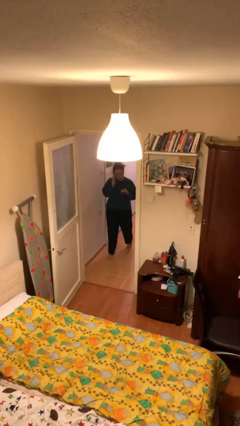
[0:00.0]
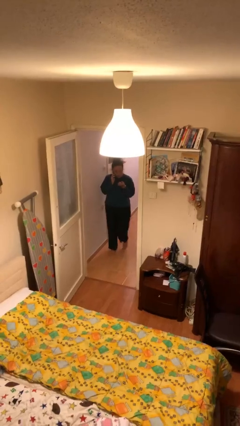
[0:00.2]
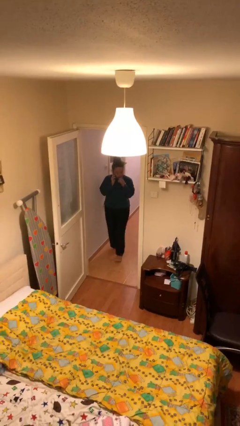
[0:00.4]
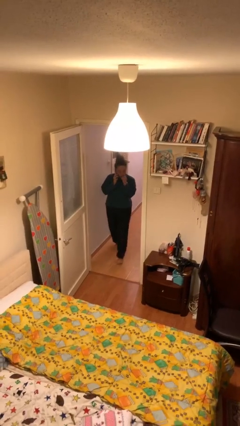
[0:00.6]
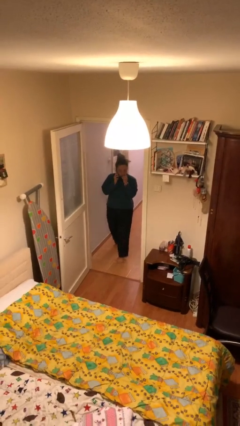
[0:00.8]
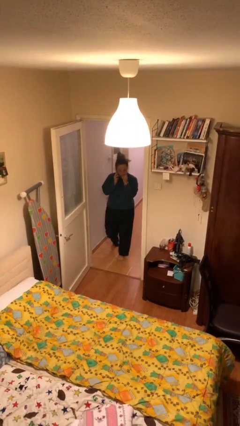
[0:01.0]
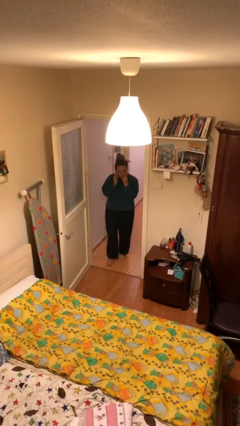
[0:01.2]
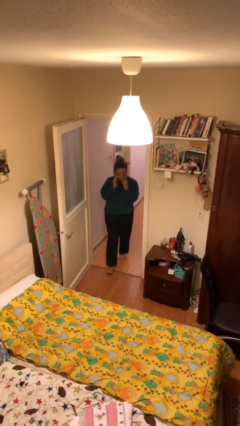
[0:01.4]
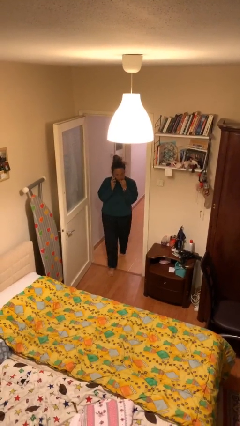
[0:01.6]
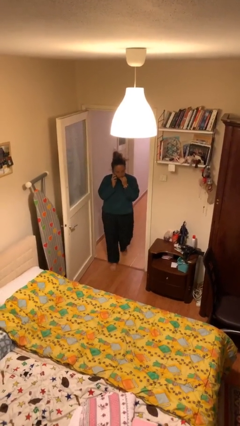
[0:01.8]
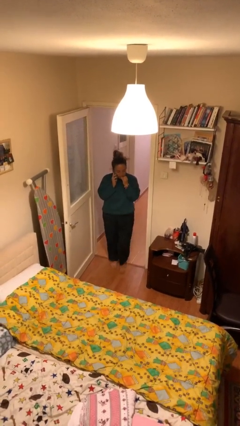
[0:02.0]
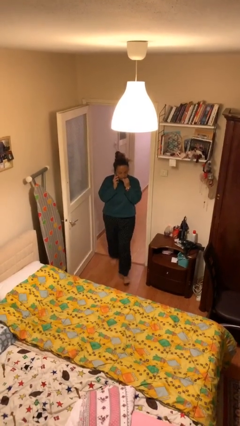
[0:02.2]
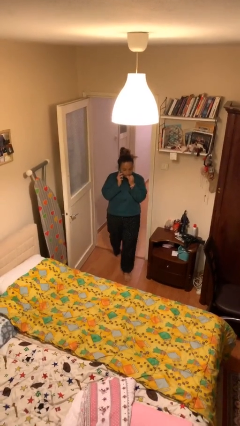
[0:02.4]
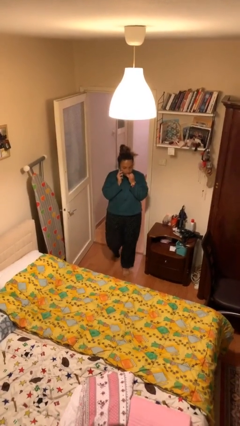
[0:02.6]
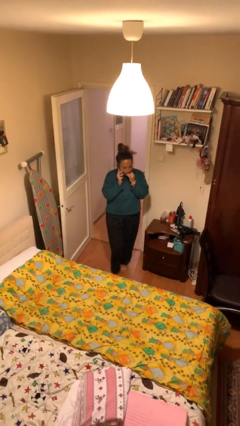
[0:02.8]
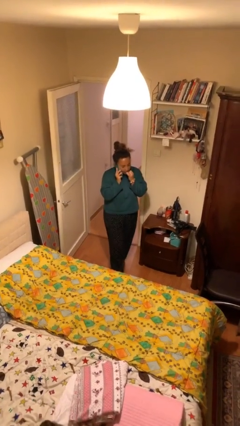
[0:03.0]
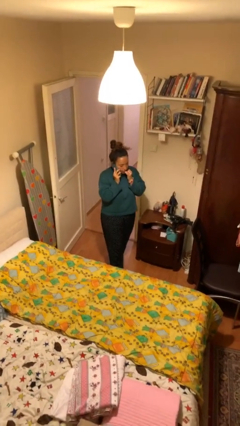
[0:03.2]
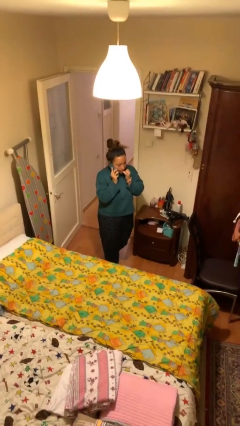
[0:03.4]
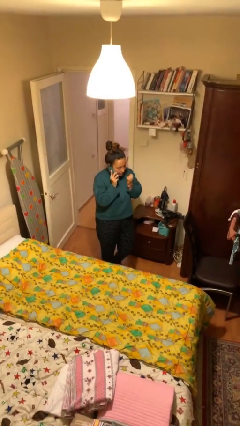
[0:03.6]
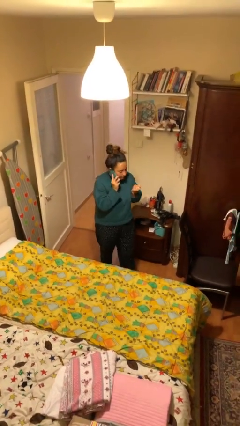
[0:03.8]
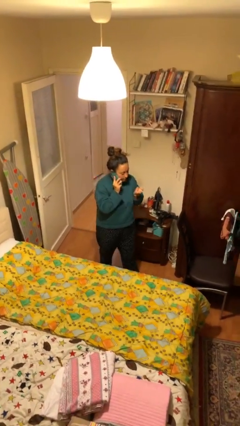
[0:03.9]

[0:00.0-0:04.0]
person enters scene through structure

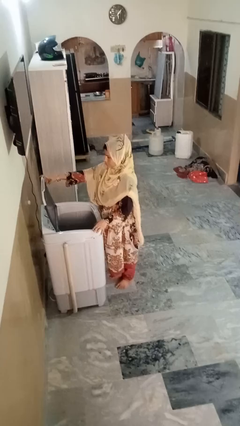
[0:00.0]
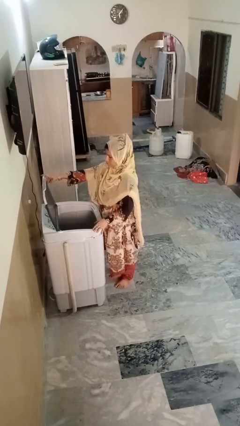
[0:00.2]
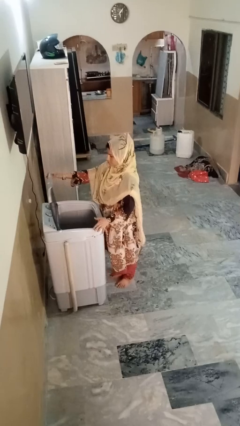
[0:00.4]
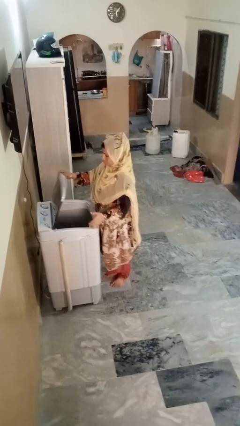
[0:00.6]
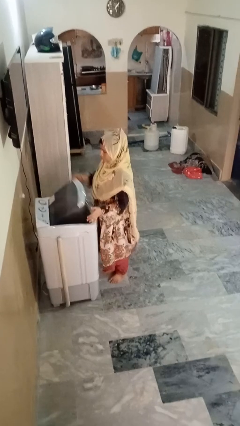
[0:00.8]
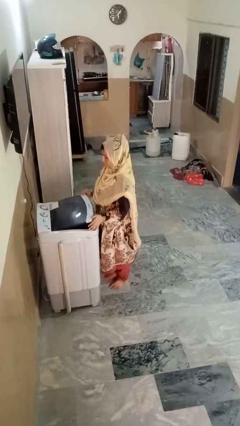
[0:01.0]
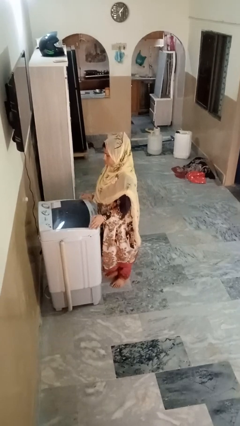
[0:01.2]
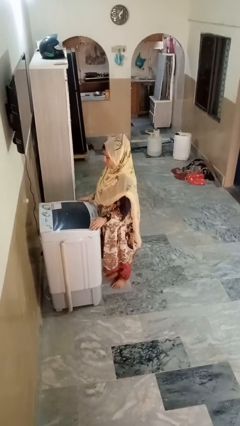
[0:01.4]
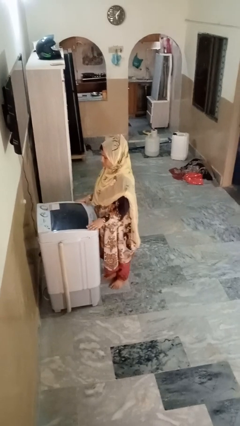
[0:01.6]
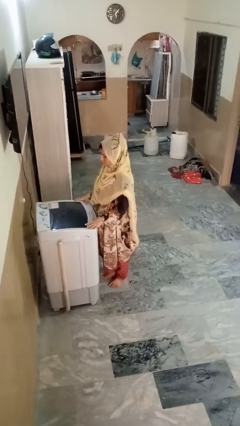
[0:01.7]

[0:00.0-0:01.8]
person closes clothes washer

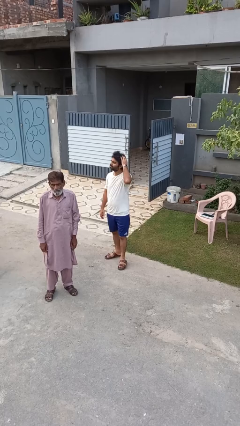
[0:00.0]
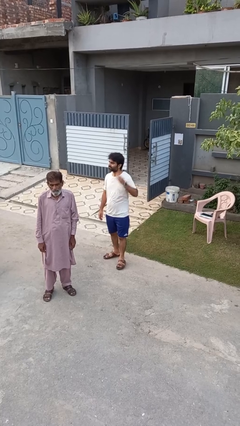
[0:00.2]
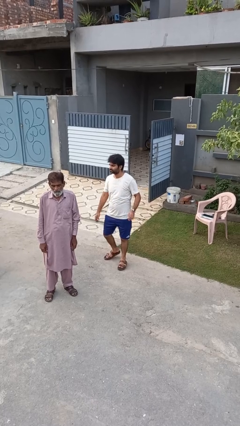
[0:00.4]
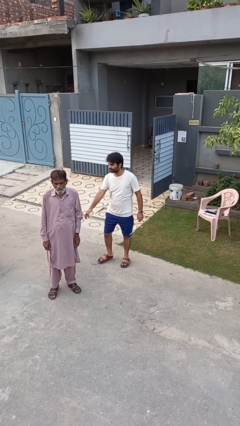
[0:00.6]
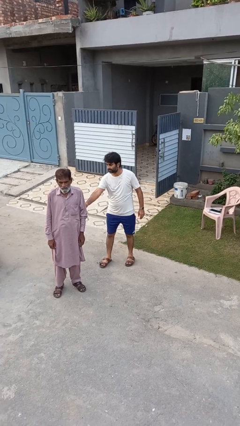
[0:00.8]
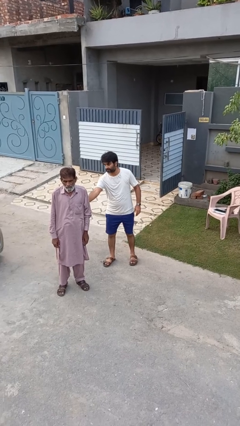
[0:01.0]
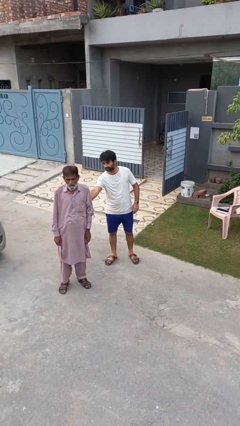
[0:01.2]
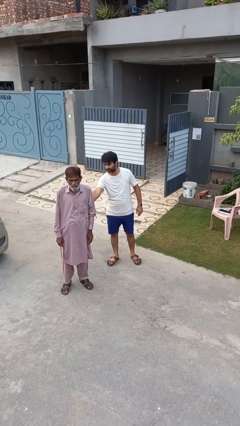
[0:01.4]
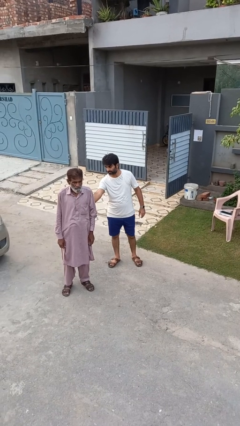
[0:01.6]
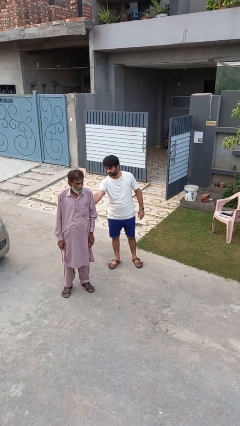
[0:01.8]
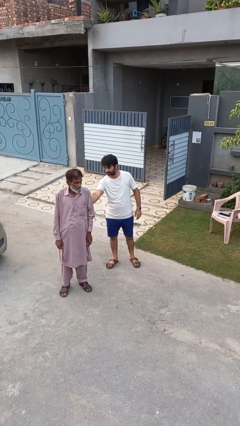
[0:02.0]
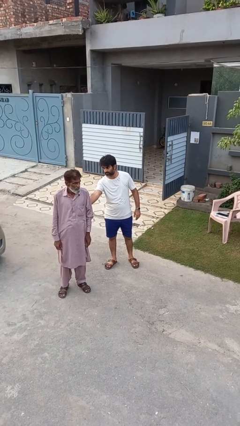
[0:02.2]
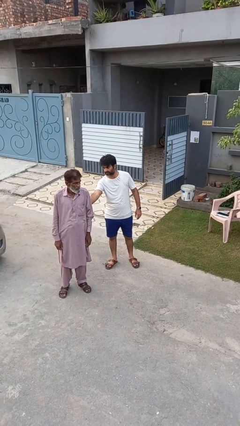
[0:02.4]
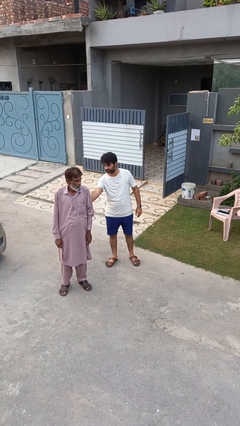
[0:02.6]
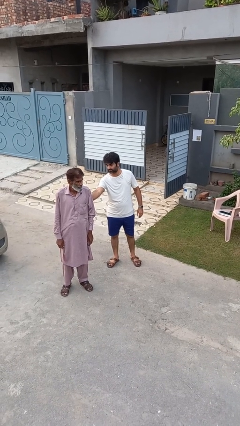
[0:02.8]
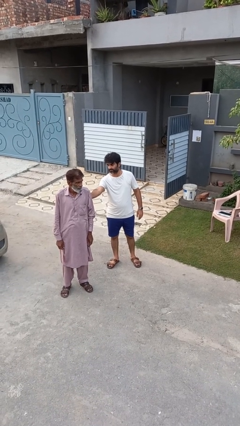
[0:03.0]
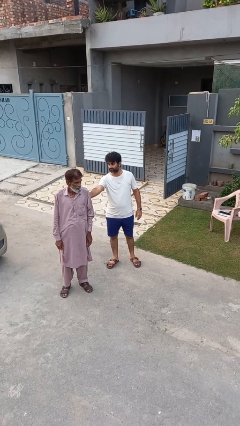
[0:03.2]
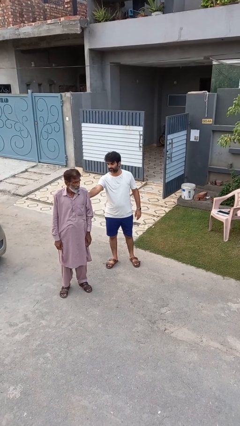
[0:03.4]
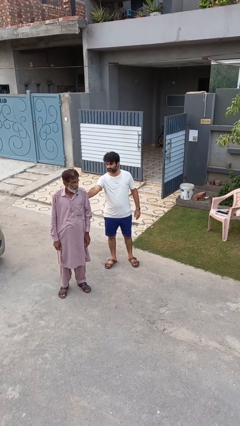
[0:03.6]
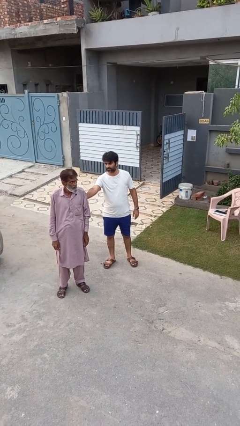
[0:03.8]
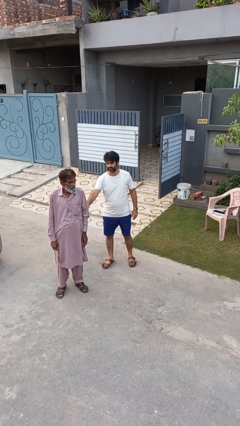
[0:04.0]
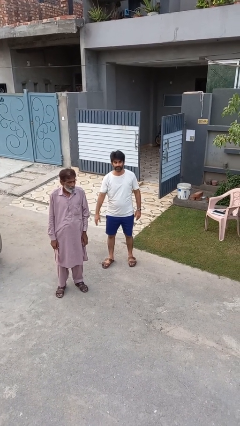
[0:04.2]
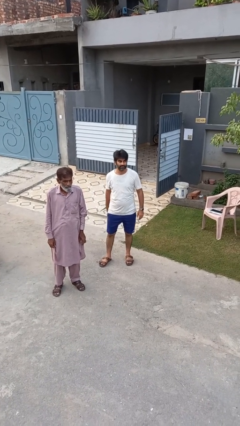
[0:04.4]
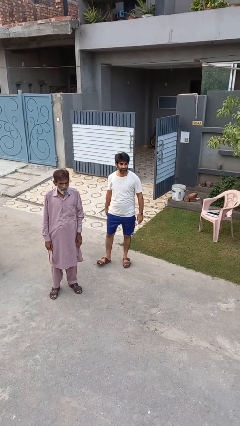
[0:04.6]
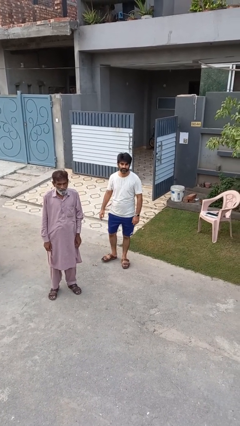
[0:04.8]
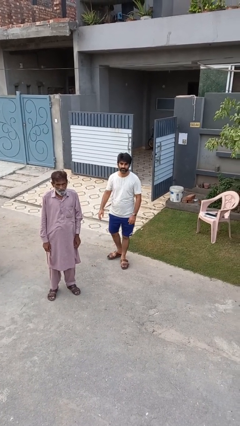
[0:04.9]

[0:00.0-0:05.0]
person touches back of person

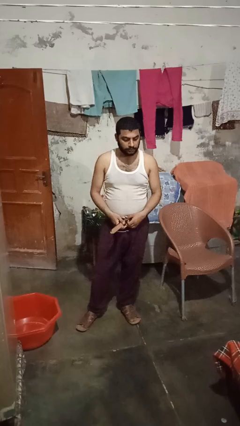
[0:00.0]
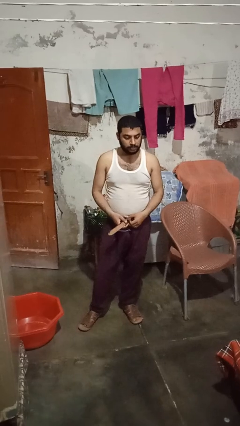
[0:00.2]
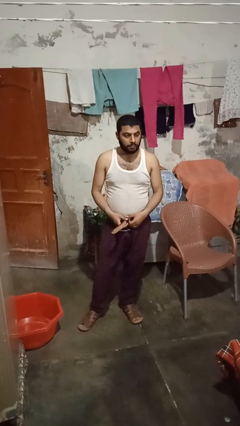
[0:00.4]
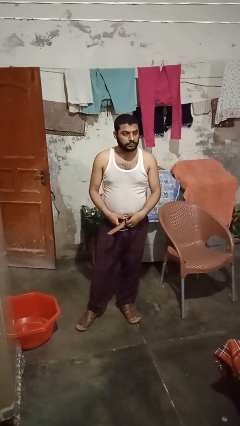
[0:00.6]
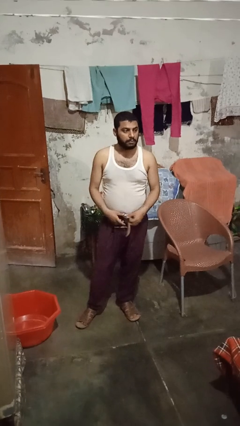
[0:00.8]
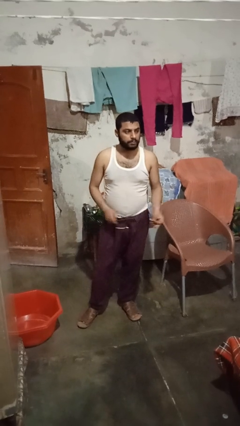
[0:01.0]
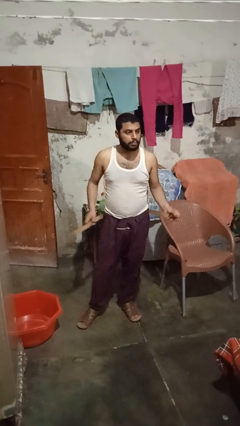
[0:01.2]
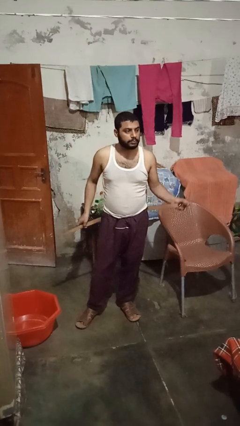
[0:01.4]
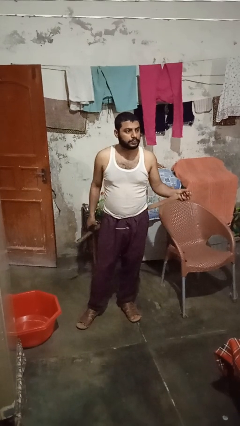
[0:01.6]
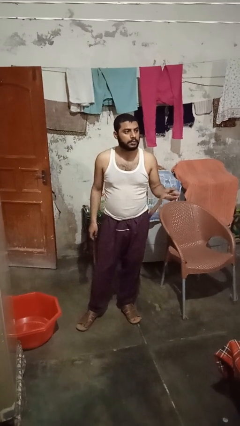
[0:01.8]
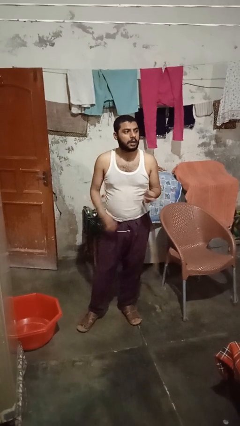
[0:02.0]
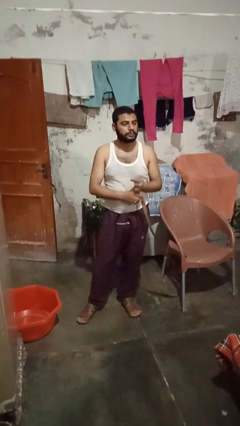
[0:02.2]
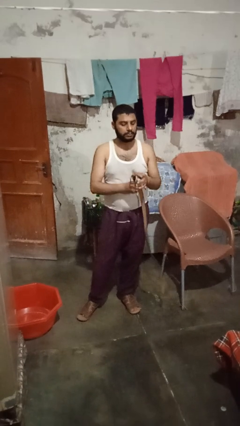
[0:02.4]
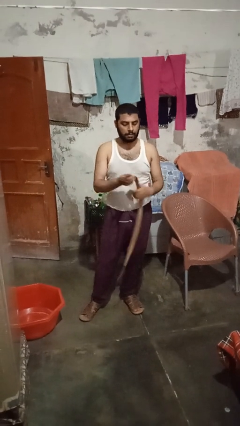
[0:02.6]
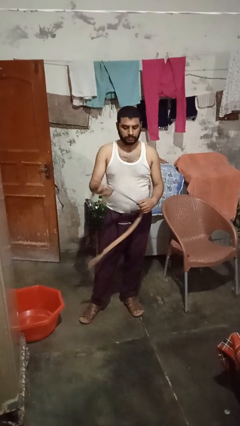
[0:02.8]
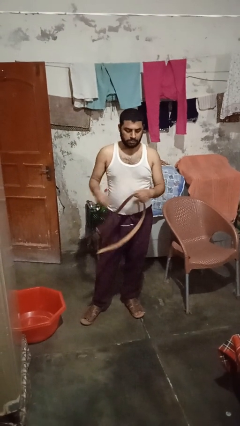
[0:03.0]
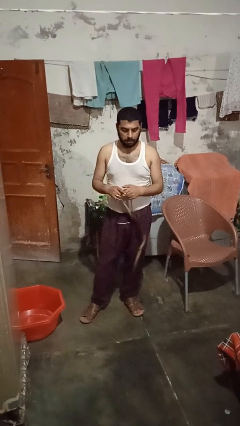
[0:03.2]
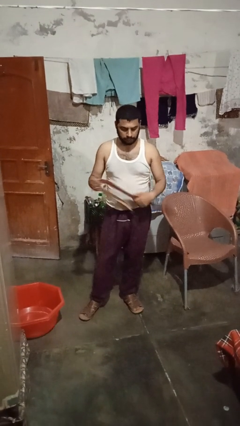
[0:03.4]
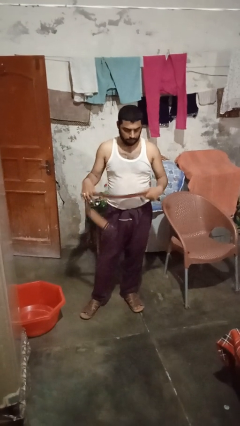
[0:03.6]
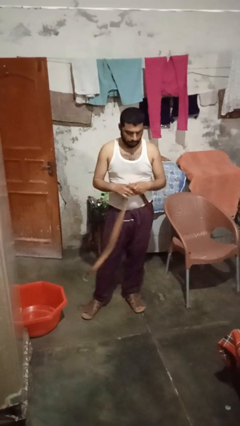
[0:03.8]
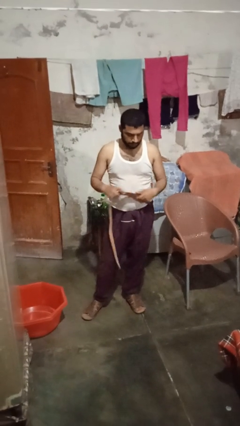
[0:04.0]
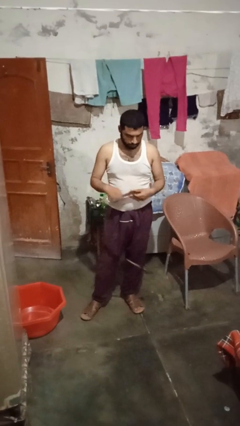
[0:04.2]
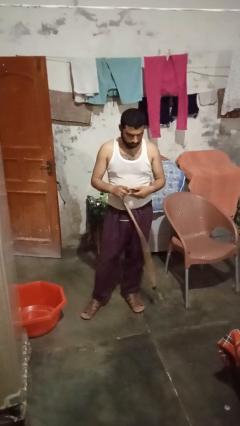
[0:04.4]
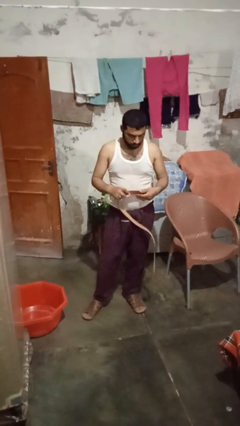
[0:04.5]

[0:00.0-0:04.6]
person takes off belt

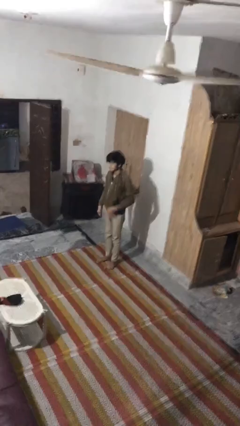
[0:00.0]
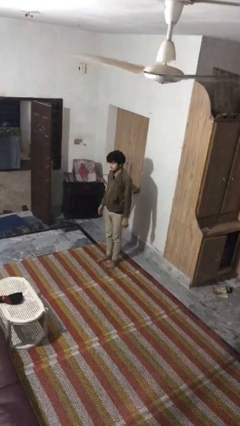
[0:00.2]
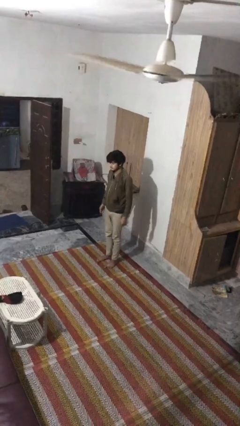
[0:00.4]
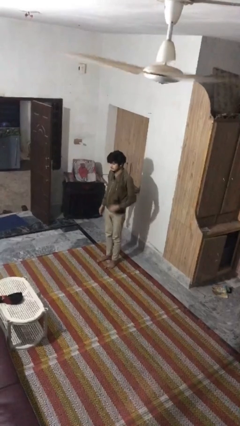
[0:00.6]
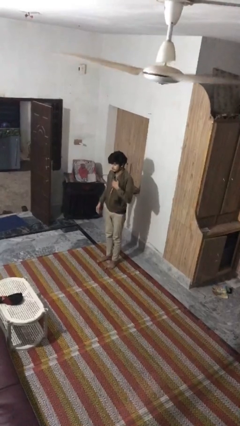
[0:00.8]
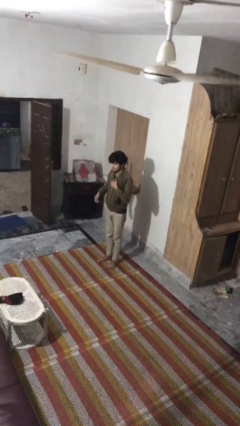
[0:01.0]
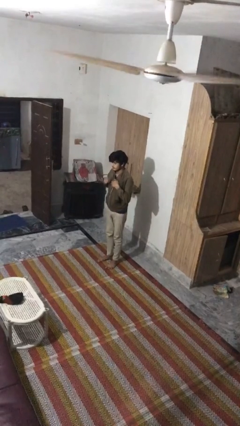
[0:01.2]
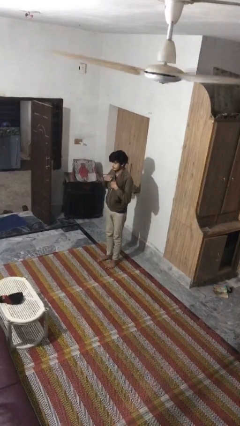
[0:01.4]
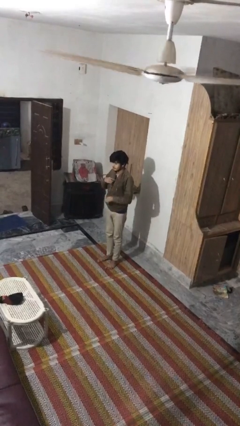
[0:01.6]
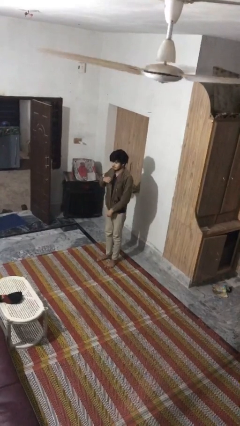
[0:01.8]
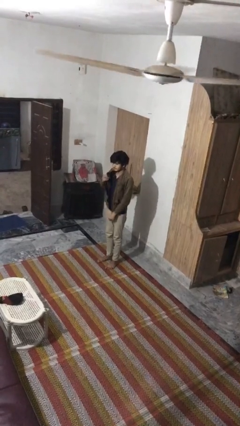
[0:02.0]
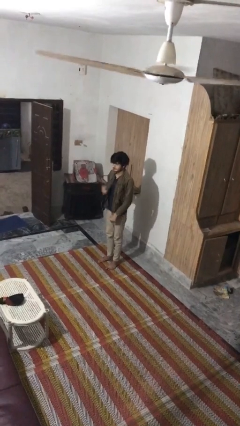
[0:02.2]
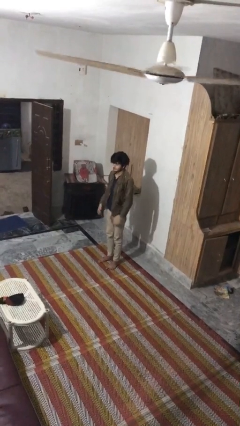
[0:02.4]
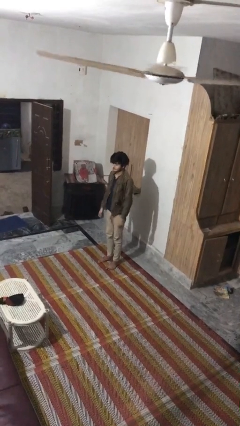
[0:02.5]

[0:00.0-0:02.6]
person unzips jacket
